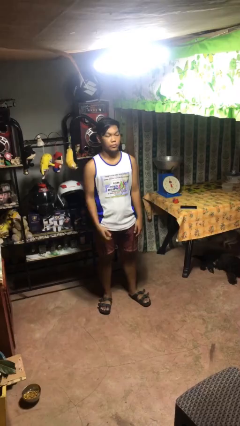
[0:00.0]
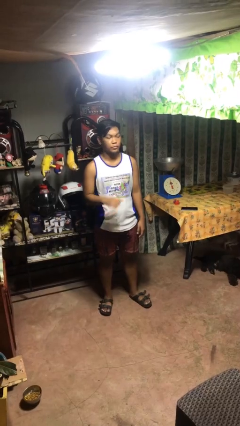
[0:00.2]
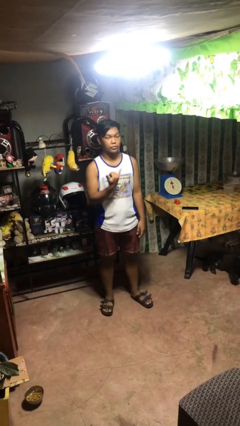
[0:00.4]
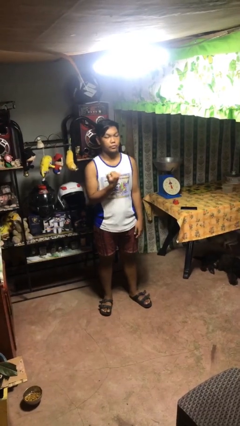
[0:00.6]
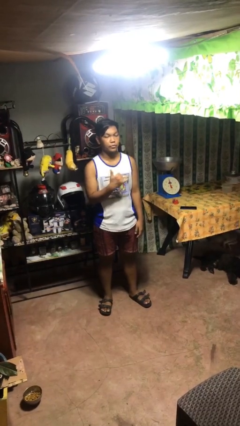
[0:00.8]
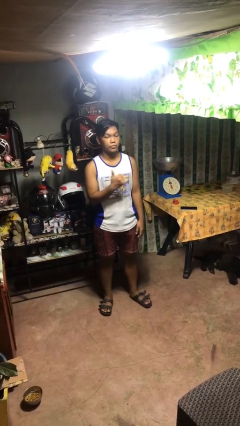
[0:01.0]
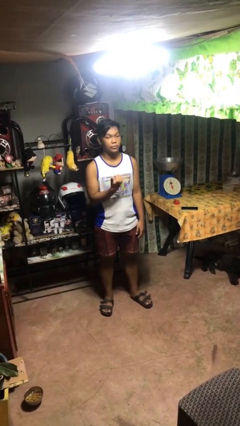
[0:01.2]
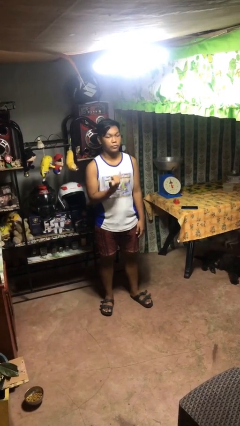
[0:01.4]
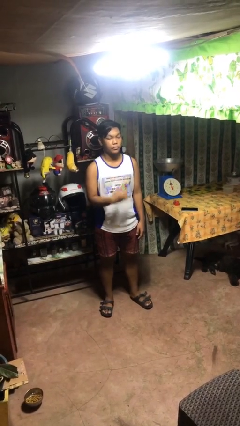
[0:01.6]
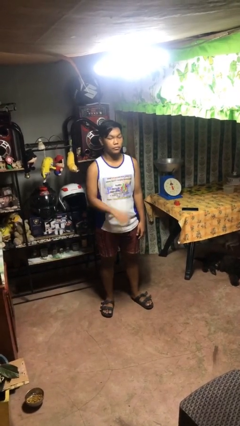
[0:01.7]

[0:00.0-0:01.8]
person gestures hang loose

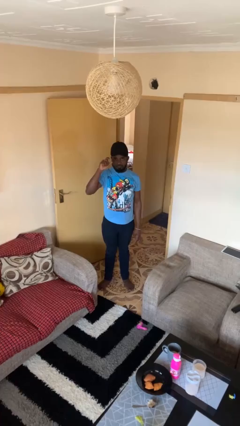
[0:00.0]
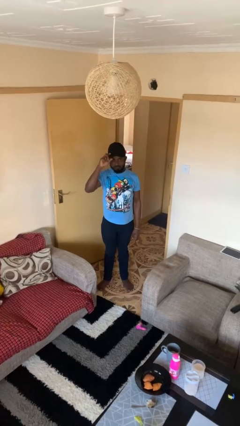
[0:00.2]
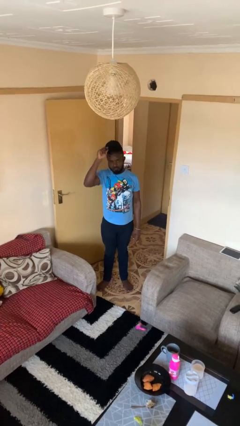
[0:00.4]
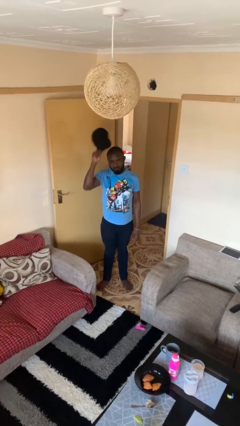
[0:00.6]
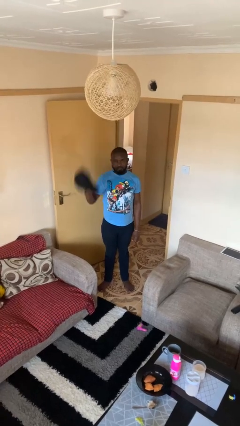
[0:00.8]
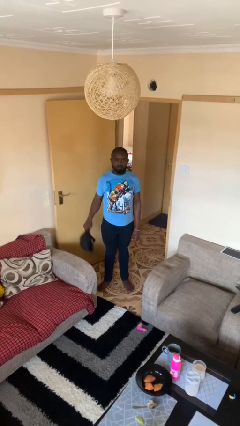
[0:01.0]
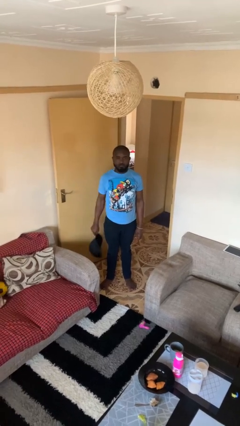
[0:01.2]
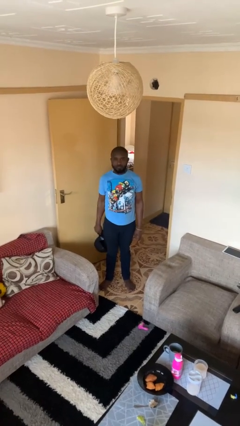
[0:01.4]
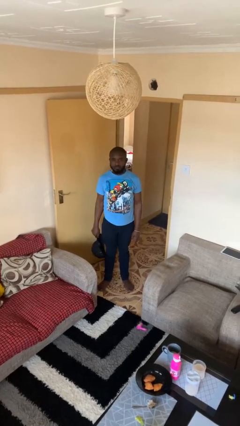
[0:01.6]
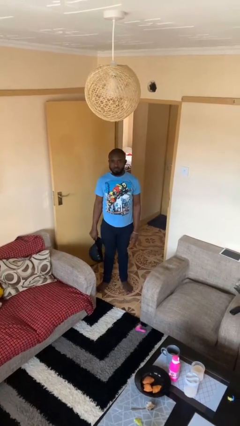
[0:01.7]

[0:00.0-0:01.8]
person takes off hat

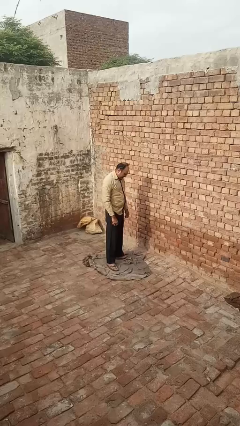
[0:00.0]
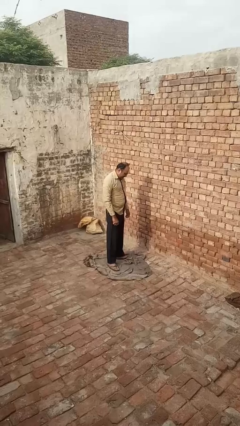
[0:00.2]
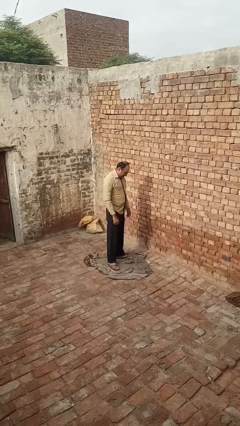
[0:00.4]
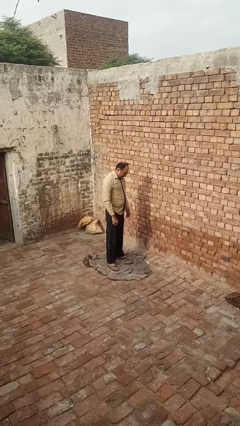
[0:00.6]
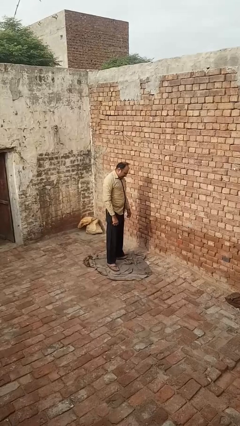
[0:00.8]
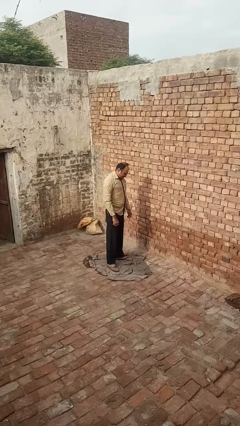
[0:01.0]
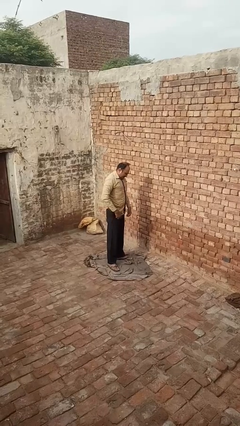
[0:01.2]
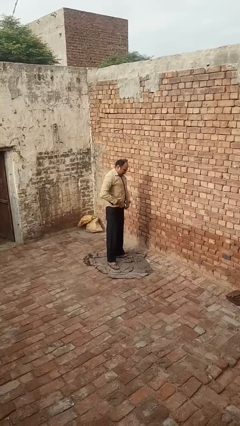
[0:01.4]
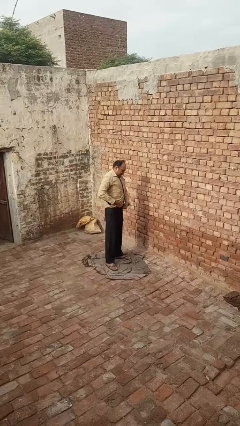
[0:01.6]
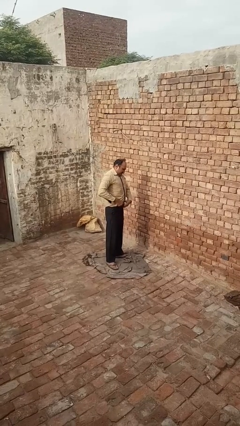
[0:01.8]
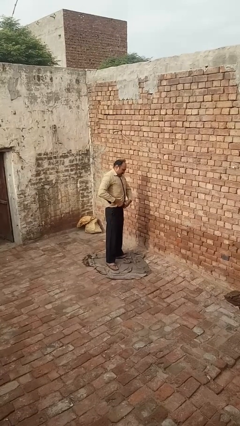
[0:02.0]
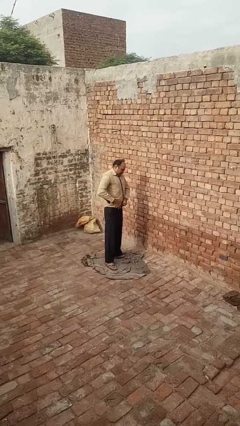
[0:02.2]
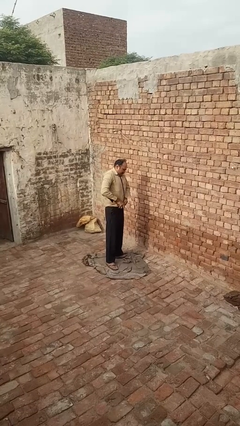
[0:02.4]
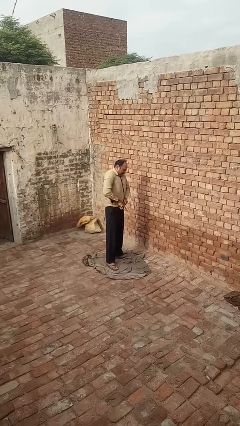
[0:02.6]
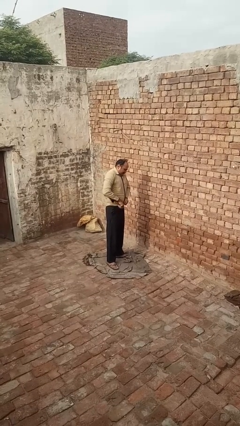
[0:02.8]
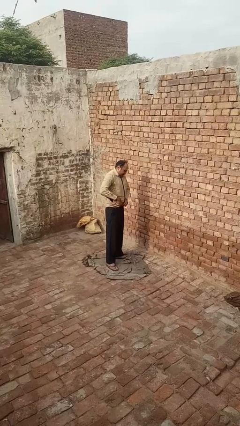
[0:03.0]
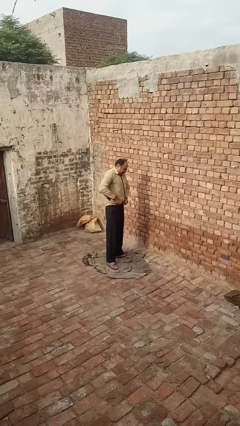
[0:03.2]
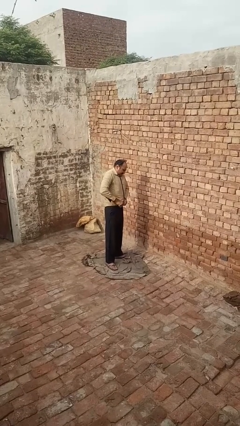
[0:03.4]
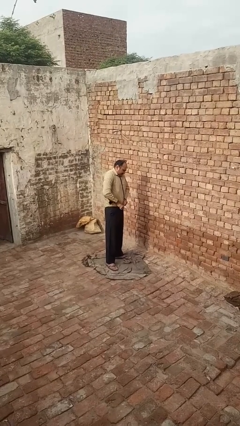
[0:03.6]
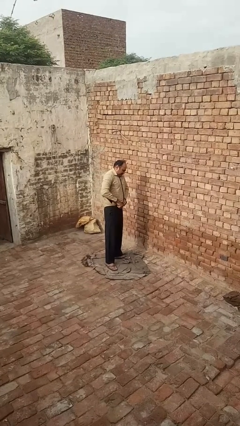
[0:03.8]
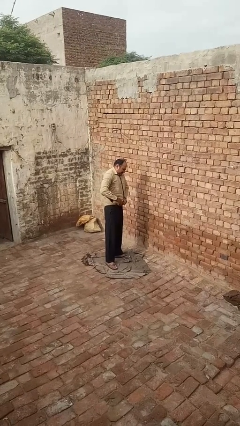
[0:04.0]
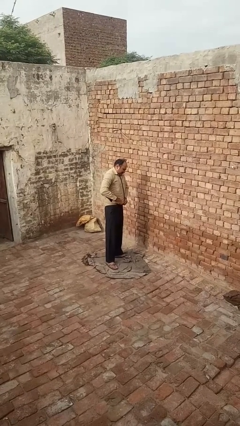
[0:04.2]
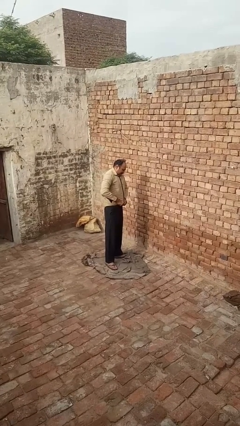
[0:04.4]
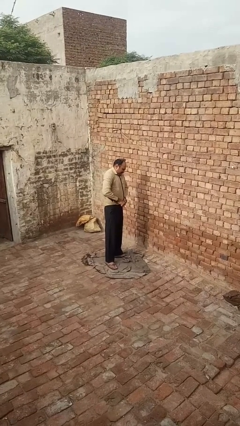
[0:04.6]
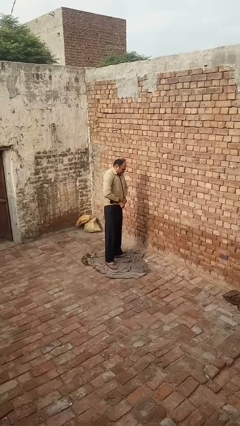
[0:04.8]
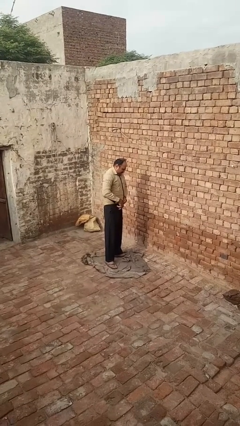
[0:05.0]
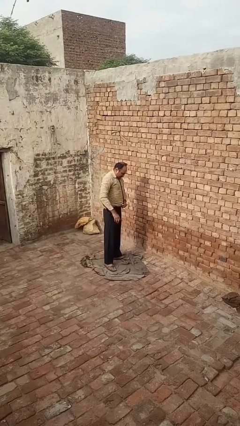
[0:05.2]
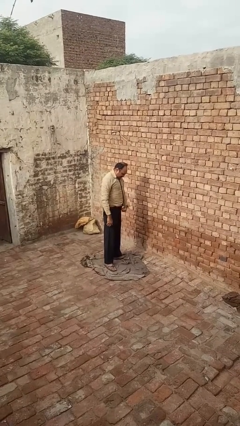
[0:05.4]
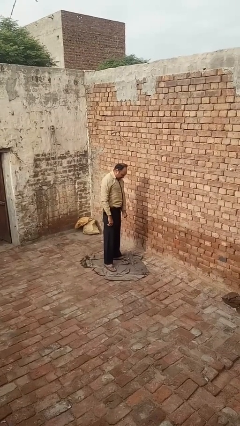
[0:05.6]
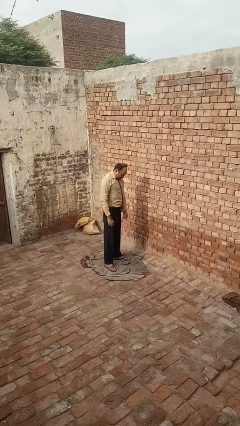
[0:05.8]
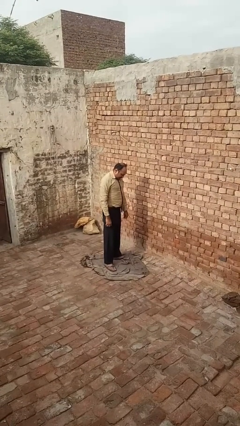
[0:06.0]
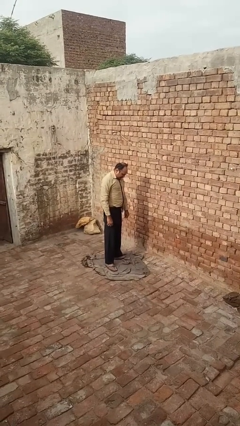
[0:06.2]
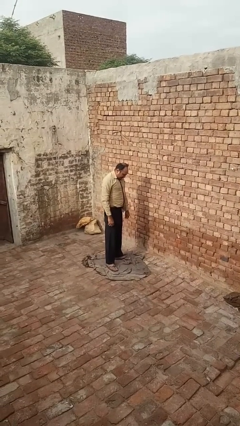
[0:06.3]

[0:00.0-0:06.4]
person tucks in shirt

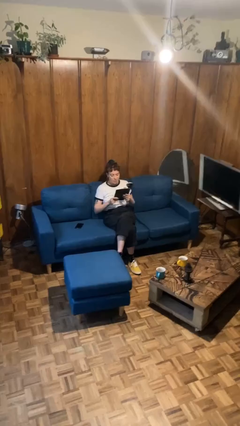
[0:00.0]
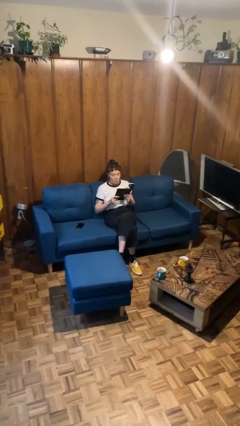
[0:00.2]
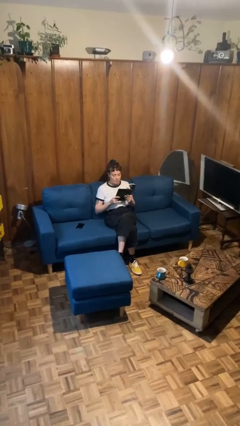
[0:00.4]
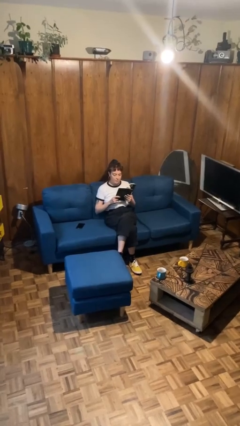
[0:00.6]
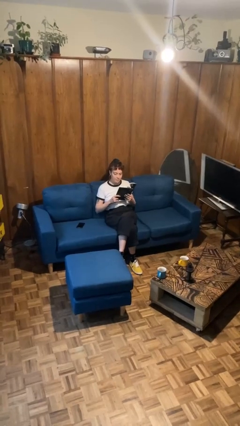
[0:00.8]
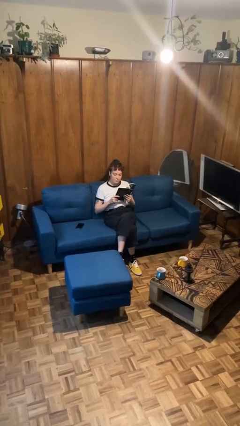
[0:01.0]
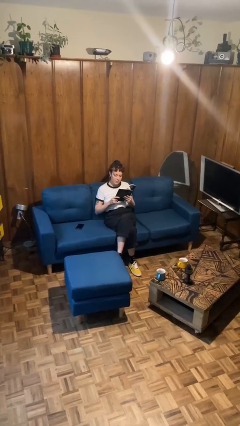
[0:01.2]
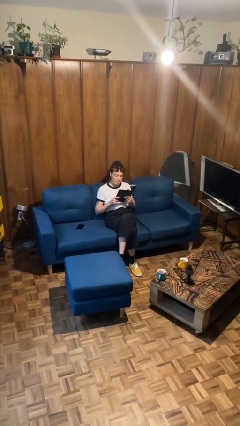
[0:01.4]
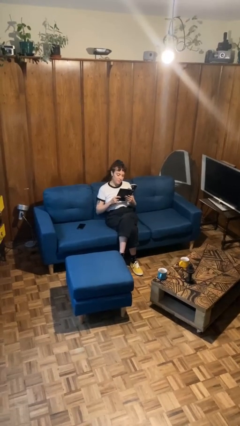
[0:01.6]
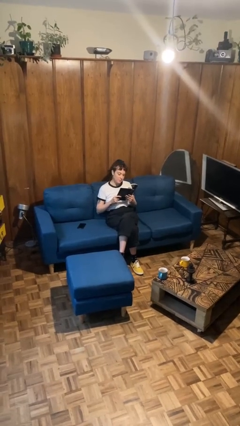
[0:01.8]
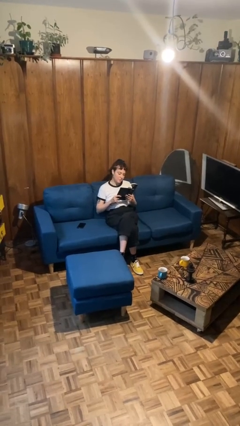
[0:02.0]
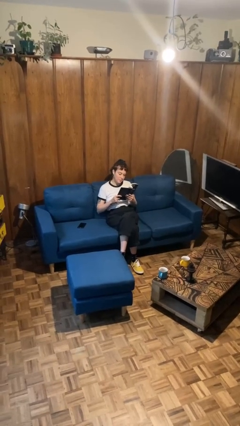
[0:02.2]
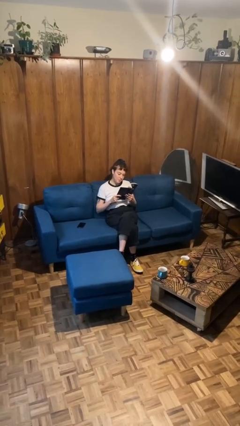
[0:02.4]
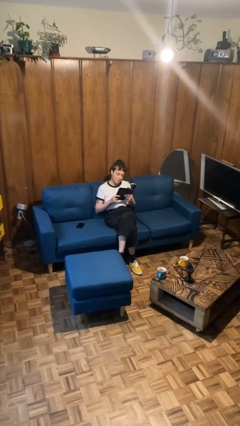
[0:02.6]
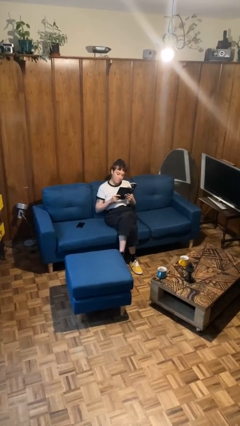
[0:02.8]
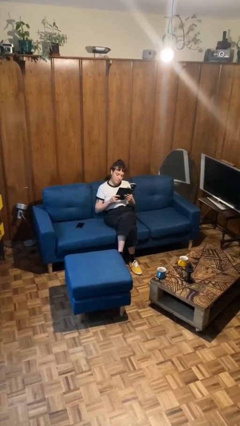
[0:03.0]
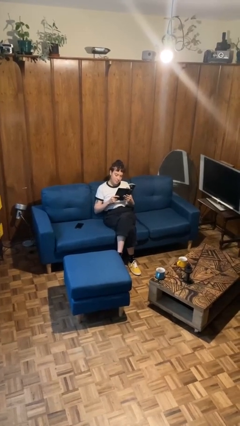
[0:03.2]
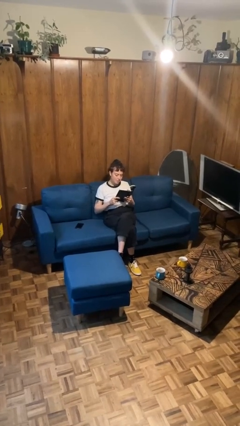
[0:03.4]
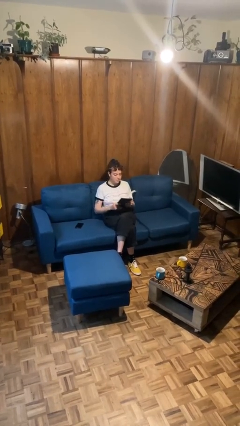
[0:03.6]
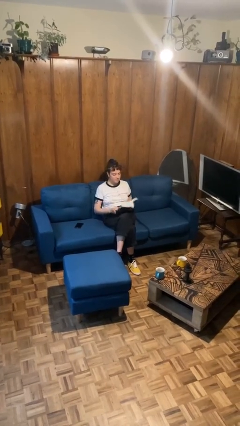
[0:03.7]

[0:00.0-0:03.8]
person reads document

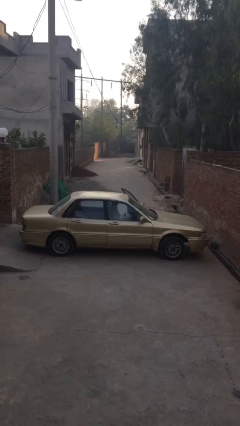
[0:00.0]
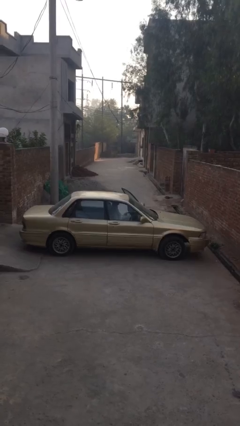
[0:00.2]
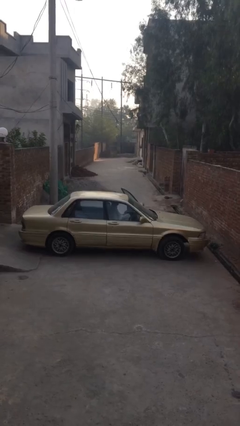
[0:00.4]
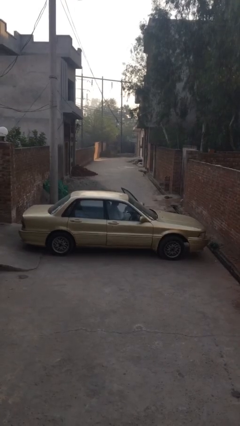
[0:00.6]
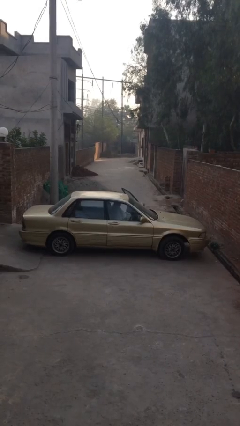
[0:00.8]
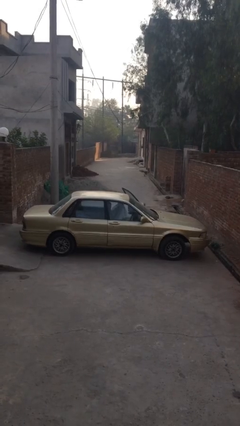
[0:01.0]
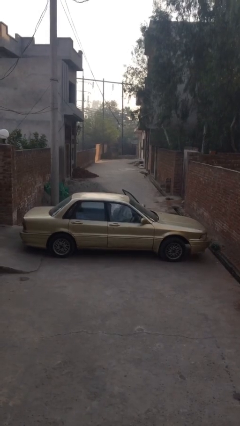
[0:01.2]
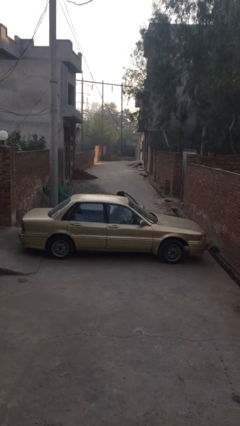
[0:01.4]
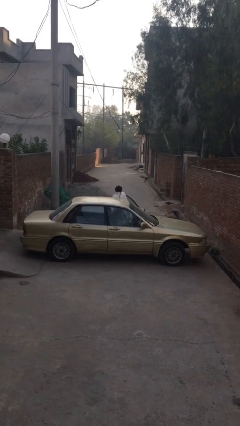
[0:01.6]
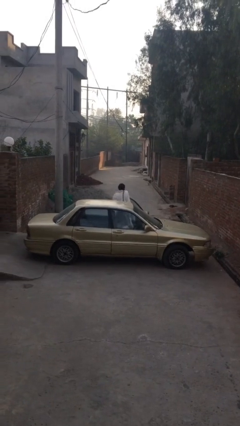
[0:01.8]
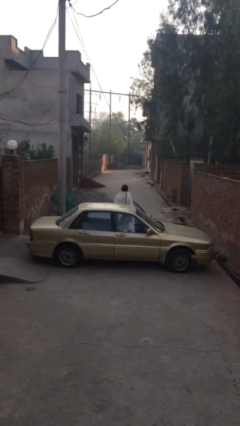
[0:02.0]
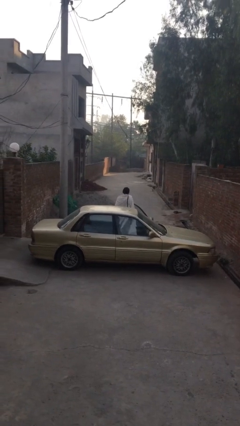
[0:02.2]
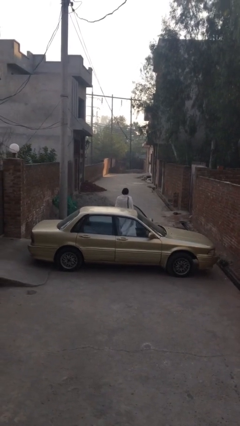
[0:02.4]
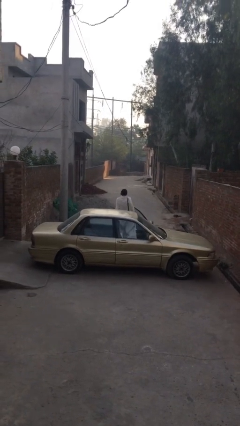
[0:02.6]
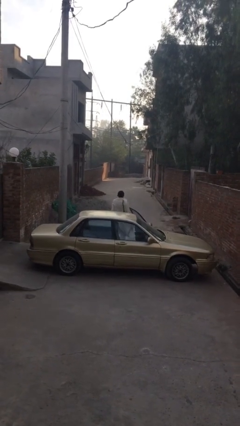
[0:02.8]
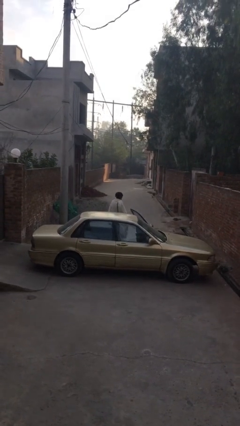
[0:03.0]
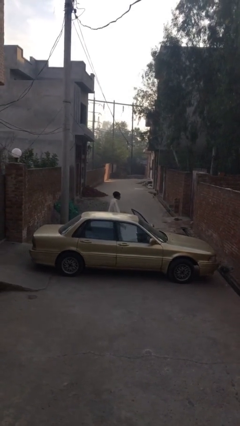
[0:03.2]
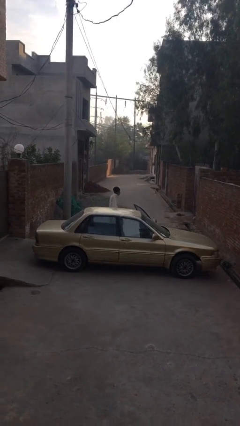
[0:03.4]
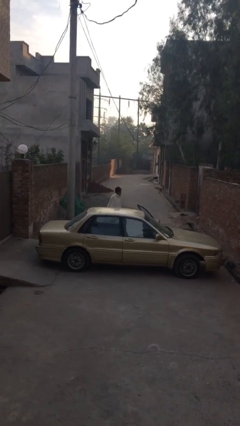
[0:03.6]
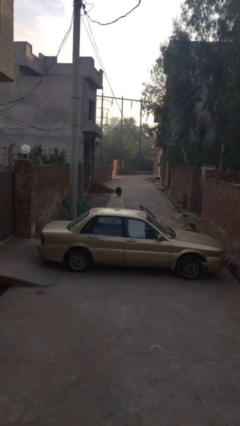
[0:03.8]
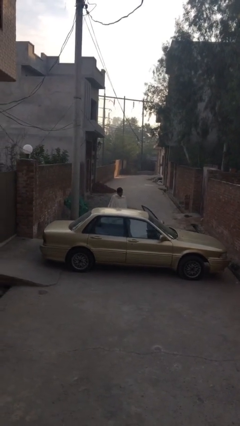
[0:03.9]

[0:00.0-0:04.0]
person exits car
